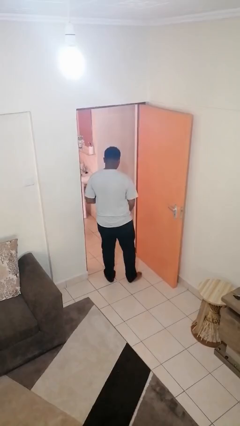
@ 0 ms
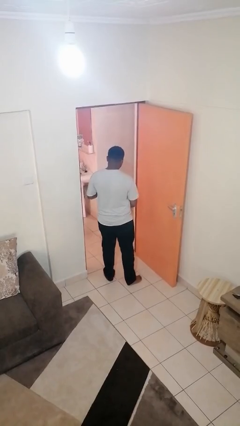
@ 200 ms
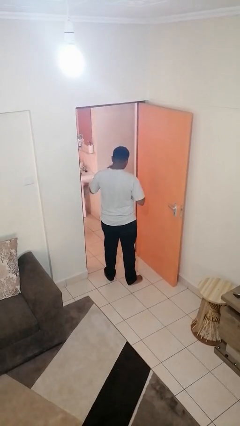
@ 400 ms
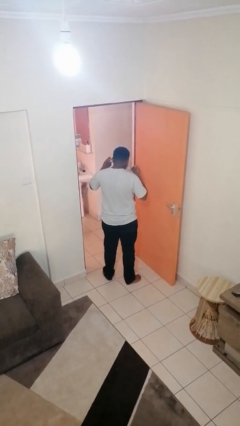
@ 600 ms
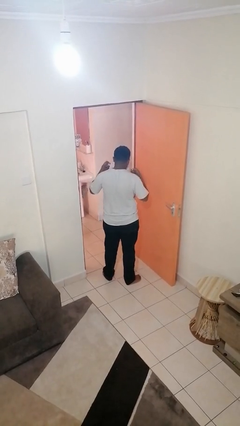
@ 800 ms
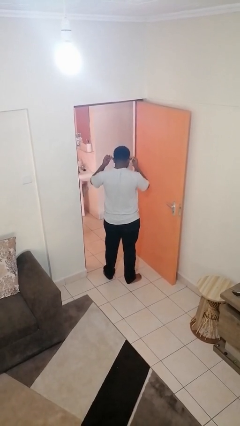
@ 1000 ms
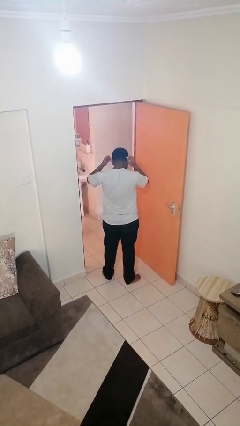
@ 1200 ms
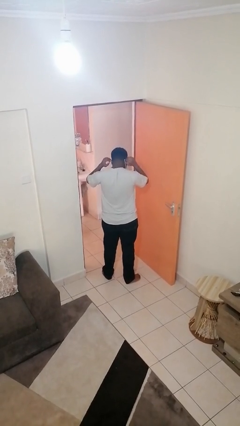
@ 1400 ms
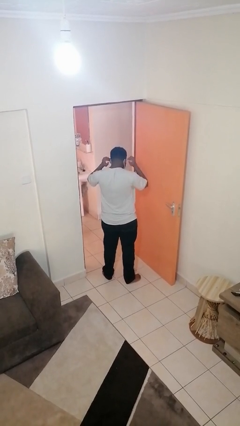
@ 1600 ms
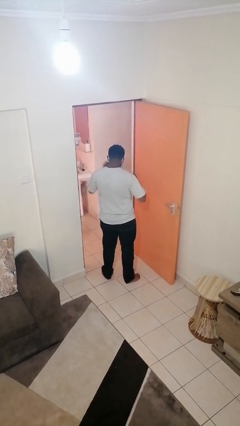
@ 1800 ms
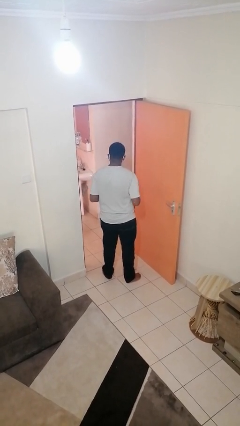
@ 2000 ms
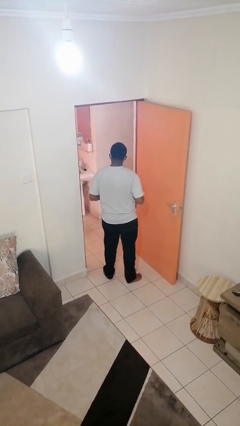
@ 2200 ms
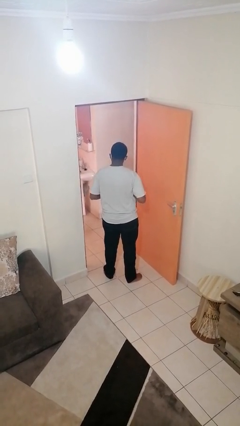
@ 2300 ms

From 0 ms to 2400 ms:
person puts on facemask

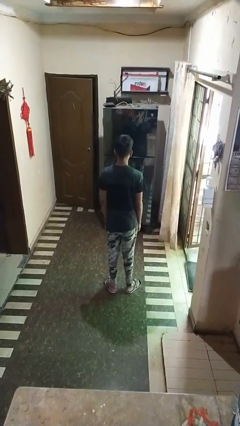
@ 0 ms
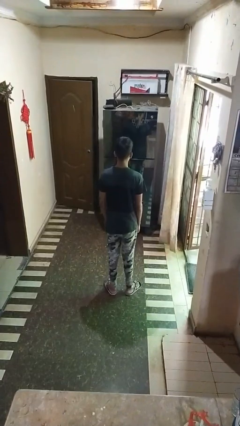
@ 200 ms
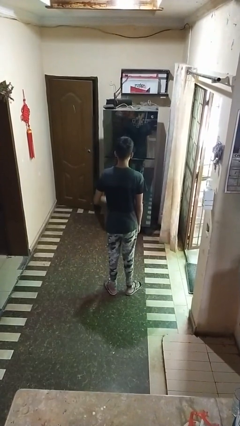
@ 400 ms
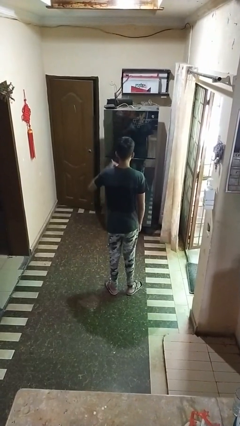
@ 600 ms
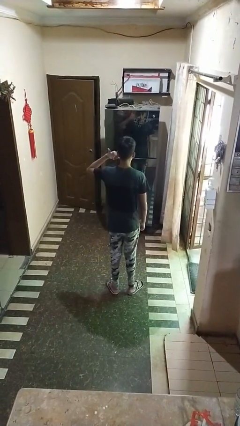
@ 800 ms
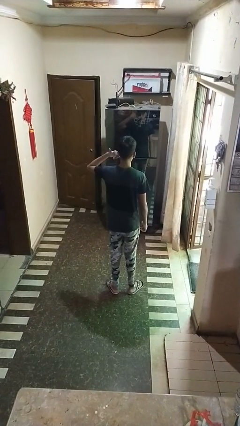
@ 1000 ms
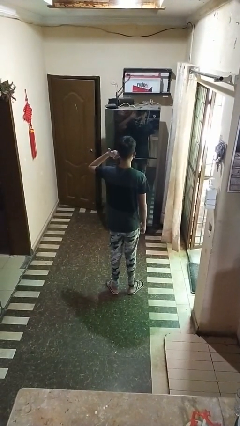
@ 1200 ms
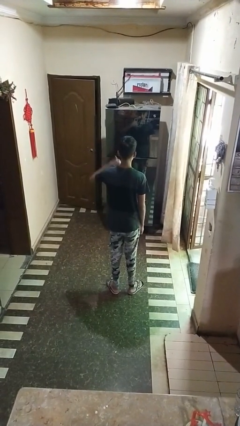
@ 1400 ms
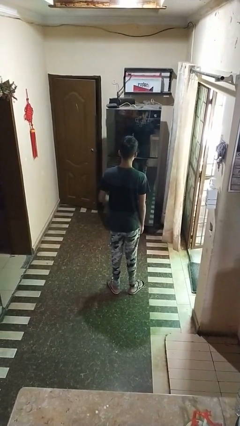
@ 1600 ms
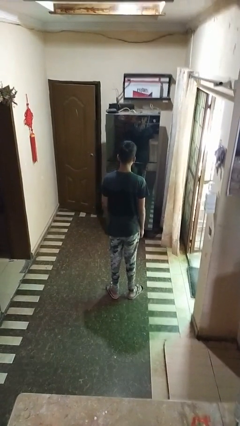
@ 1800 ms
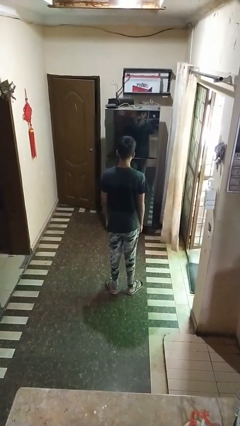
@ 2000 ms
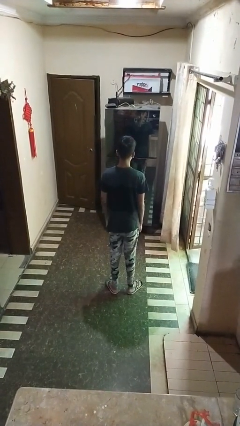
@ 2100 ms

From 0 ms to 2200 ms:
person gestures call me

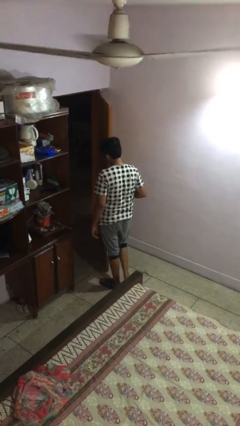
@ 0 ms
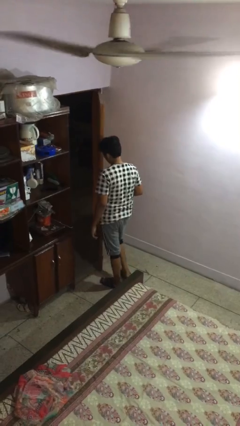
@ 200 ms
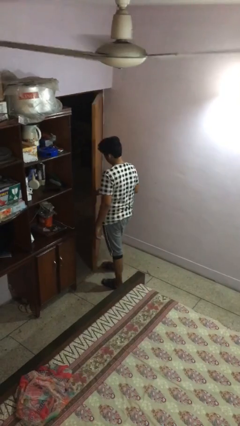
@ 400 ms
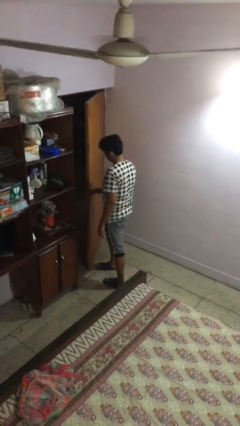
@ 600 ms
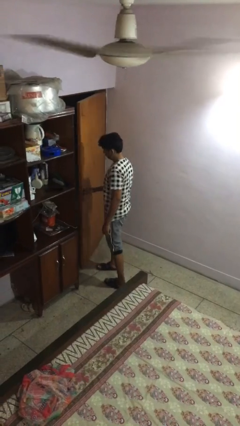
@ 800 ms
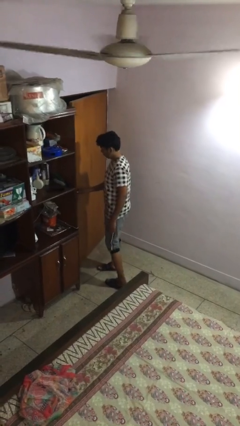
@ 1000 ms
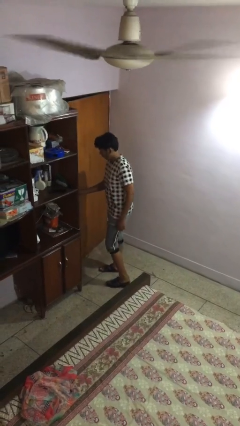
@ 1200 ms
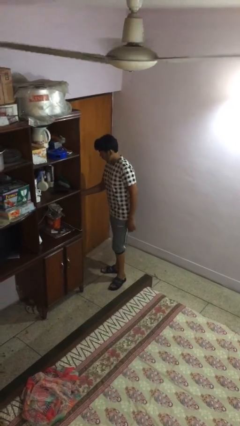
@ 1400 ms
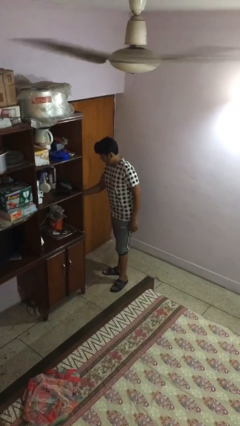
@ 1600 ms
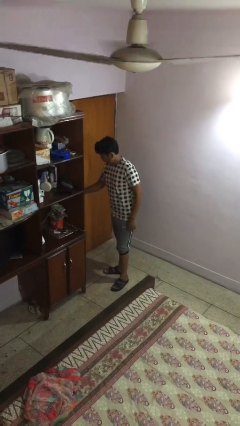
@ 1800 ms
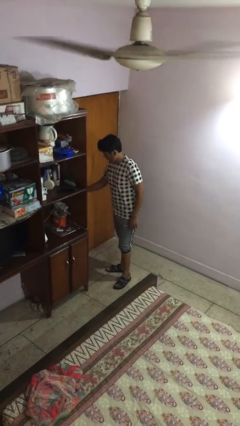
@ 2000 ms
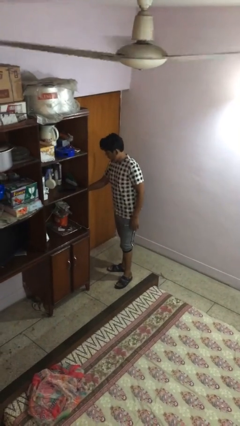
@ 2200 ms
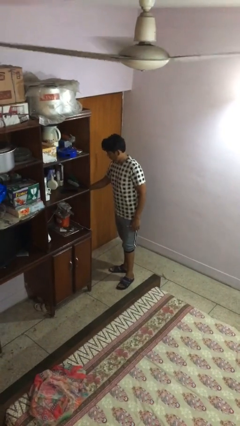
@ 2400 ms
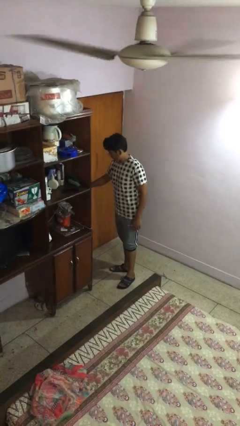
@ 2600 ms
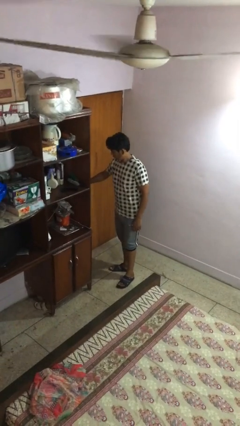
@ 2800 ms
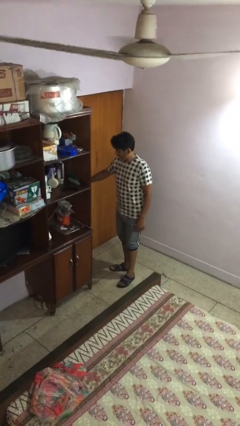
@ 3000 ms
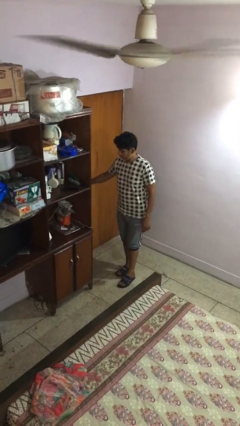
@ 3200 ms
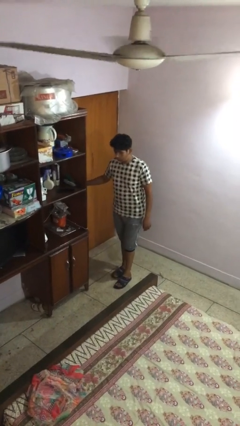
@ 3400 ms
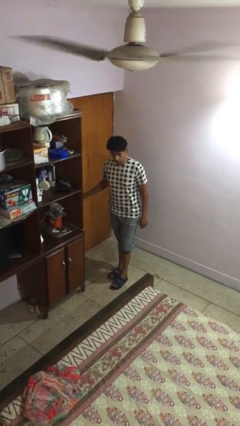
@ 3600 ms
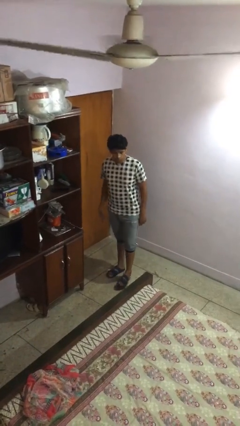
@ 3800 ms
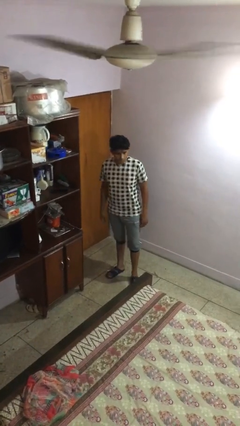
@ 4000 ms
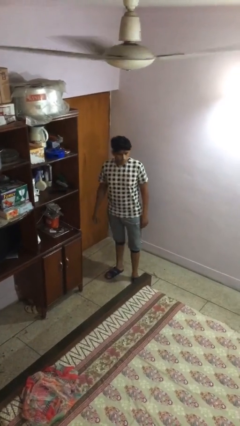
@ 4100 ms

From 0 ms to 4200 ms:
person closes facility door

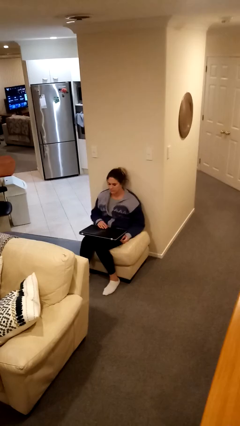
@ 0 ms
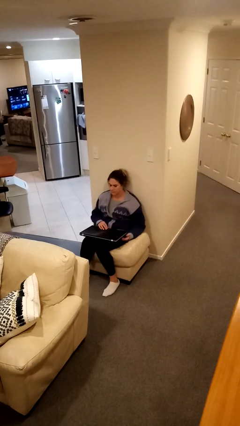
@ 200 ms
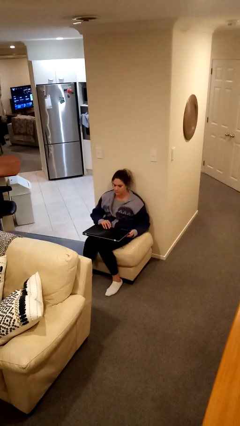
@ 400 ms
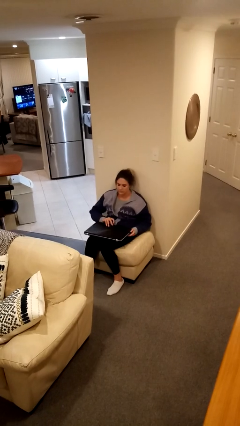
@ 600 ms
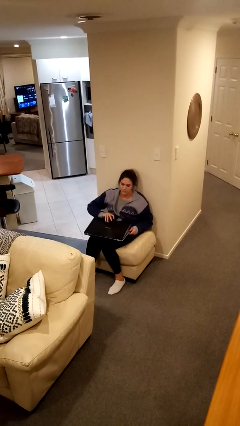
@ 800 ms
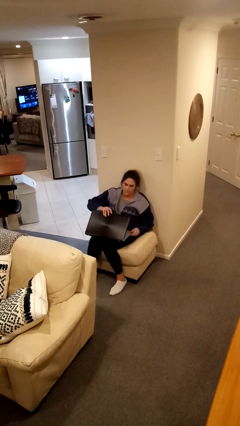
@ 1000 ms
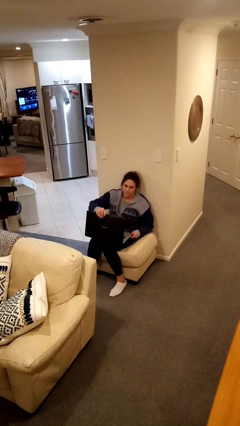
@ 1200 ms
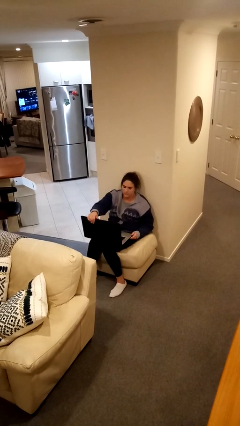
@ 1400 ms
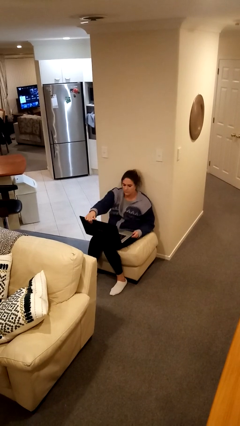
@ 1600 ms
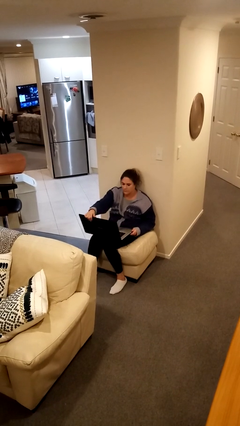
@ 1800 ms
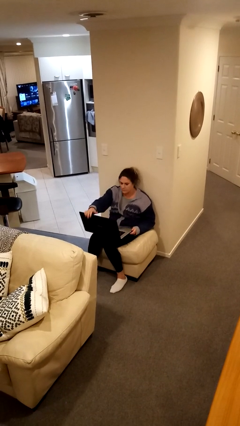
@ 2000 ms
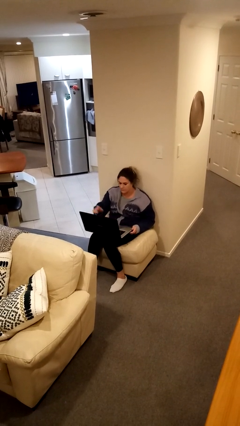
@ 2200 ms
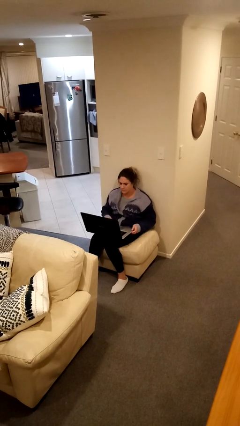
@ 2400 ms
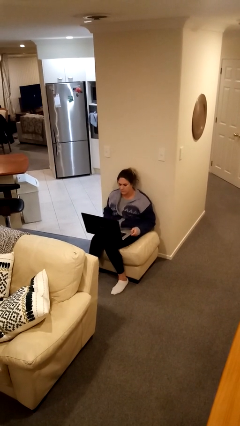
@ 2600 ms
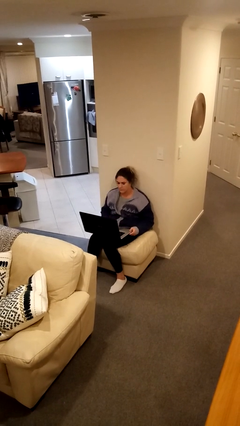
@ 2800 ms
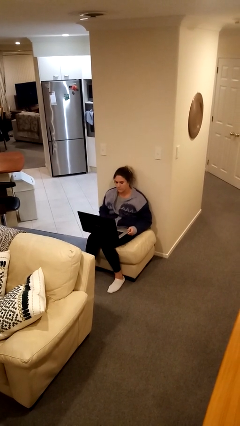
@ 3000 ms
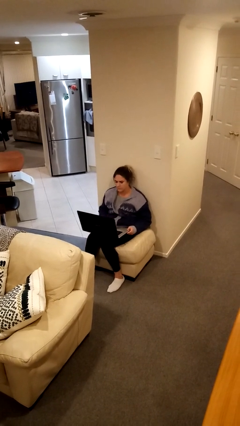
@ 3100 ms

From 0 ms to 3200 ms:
person opens laptop

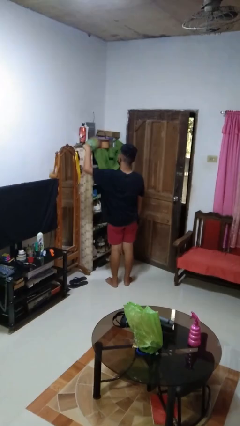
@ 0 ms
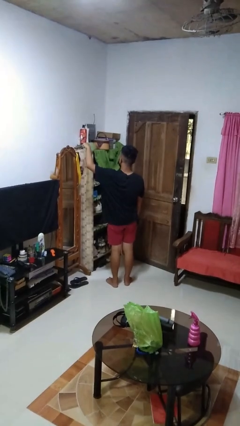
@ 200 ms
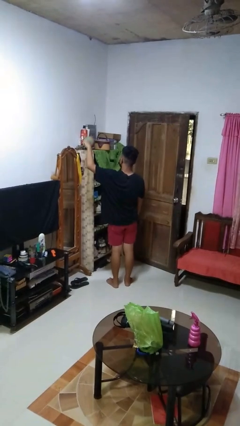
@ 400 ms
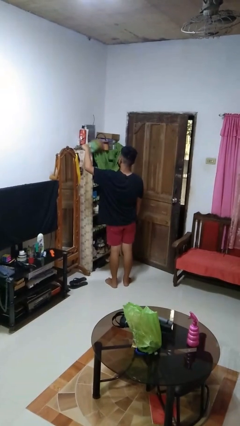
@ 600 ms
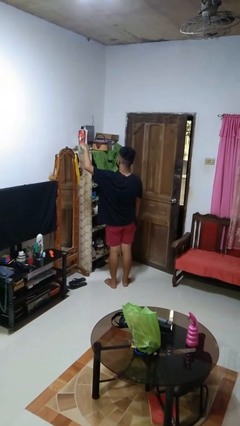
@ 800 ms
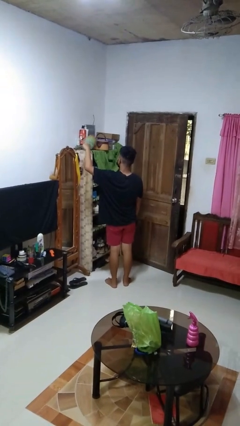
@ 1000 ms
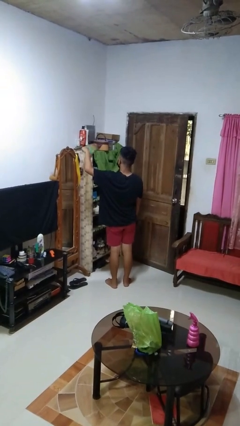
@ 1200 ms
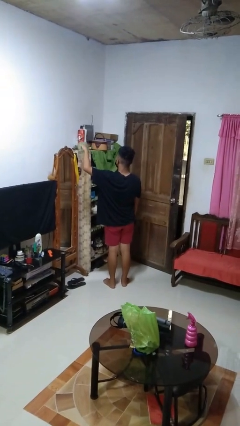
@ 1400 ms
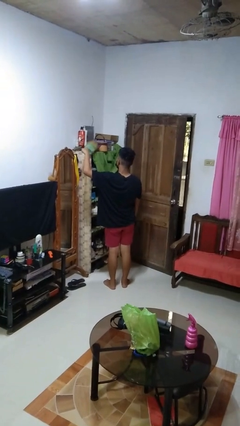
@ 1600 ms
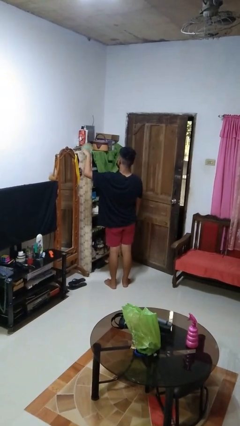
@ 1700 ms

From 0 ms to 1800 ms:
person dusts furniture

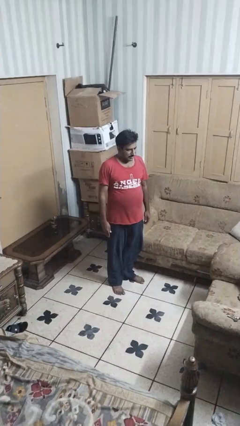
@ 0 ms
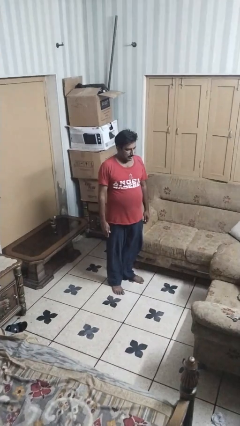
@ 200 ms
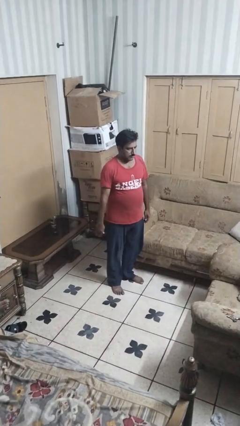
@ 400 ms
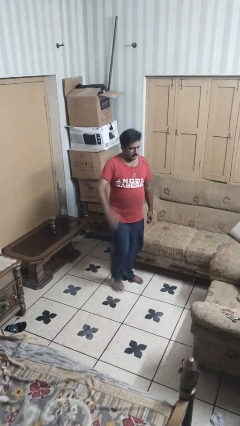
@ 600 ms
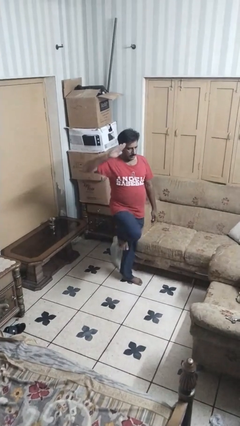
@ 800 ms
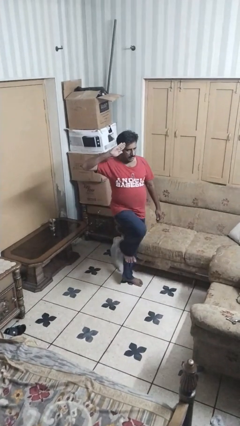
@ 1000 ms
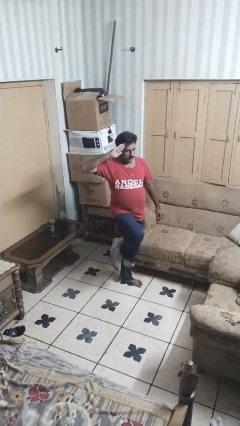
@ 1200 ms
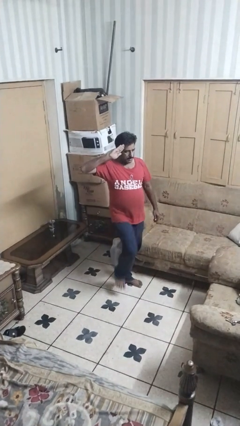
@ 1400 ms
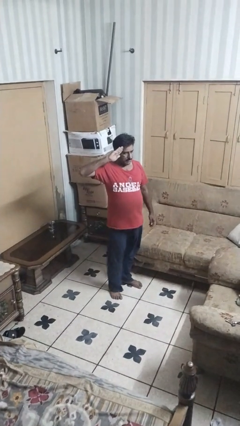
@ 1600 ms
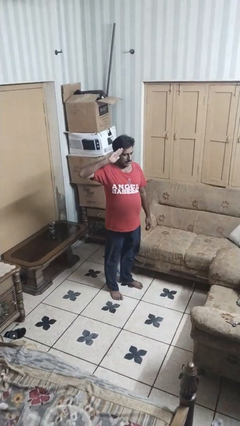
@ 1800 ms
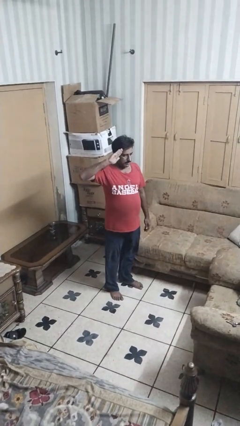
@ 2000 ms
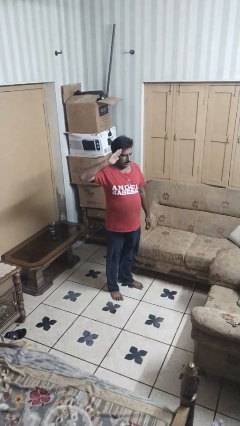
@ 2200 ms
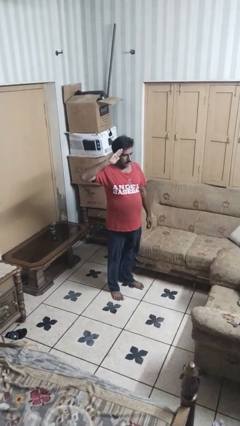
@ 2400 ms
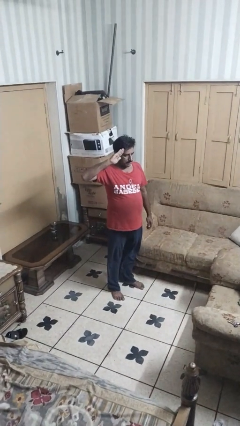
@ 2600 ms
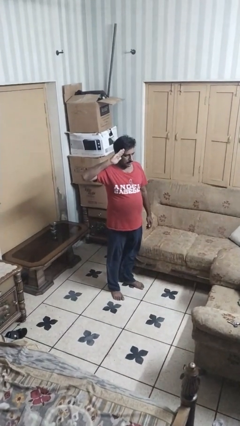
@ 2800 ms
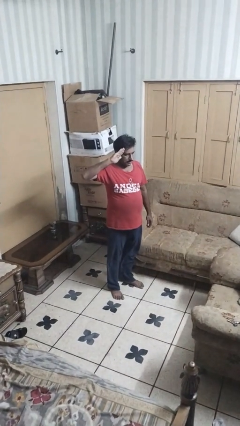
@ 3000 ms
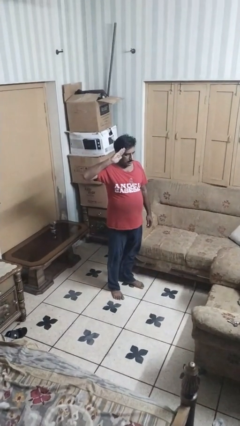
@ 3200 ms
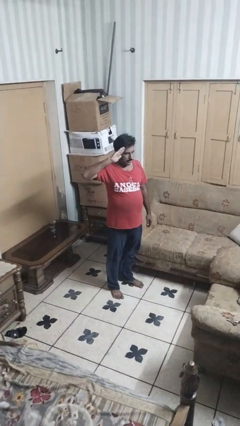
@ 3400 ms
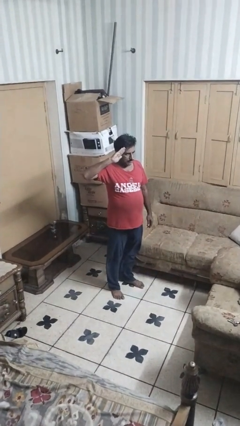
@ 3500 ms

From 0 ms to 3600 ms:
person salutes
